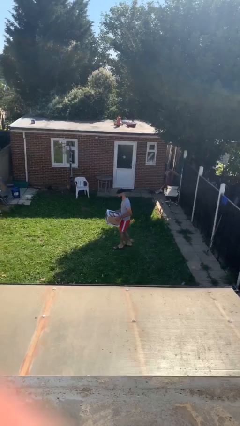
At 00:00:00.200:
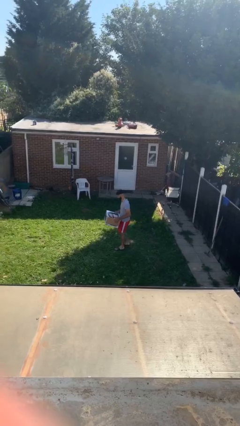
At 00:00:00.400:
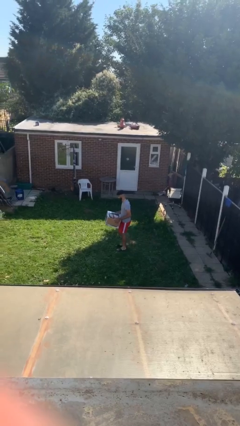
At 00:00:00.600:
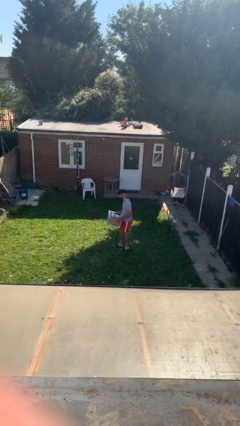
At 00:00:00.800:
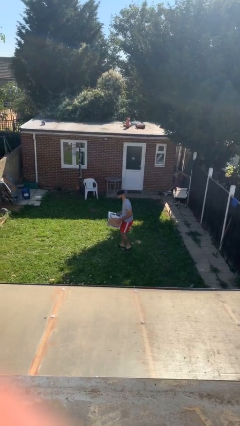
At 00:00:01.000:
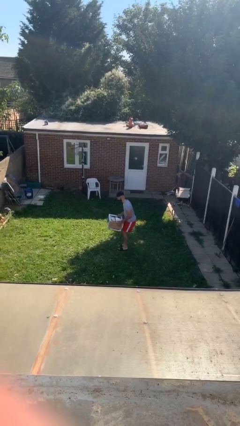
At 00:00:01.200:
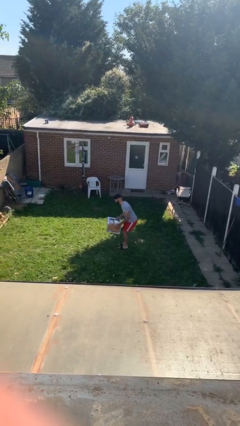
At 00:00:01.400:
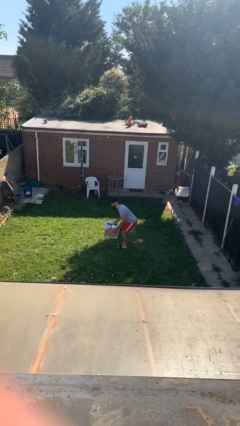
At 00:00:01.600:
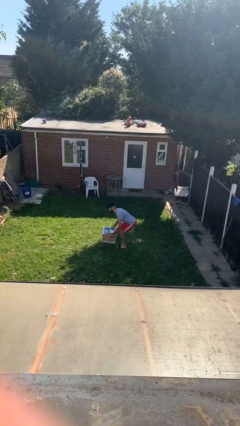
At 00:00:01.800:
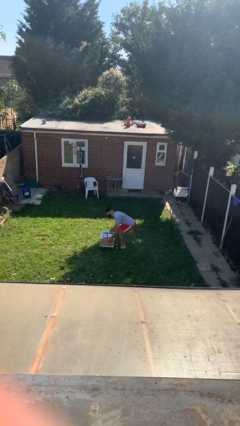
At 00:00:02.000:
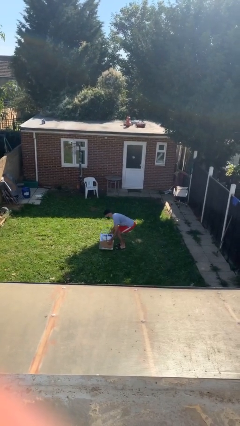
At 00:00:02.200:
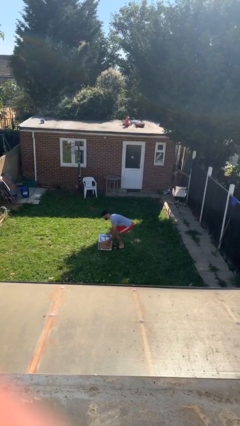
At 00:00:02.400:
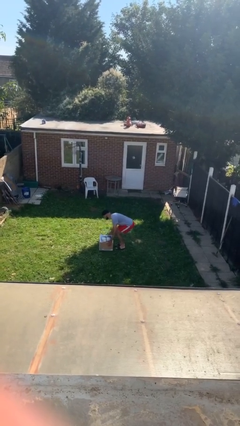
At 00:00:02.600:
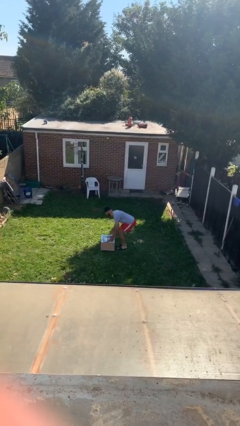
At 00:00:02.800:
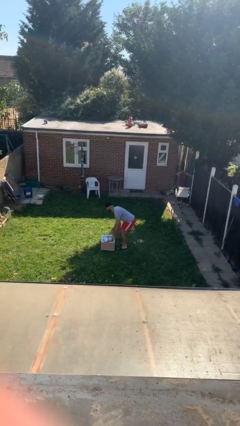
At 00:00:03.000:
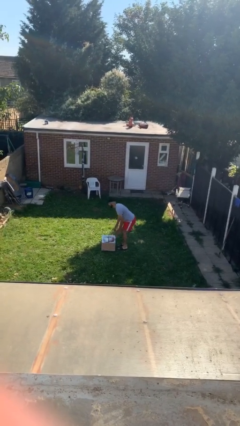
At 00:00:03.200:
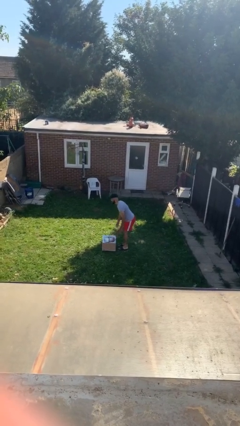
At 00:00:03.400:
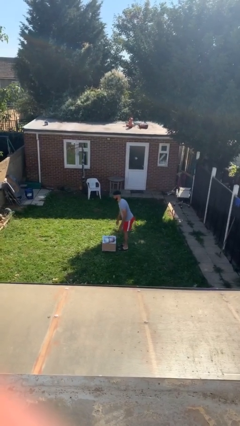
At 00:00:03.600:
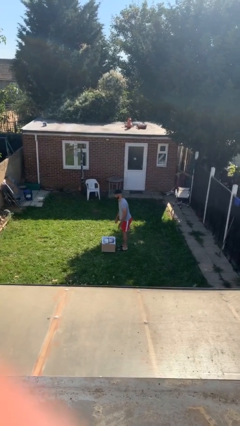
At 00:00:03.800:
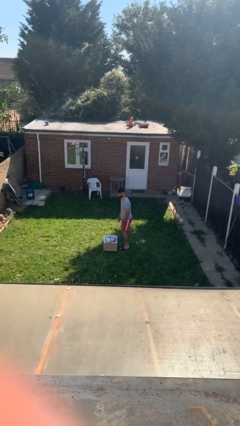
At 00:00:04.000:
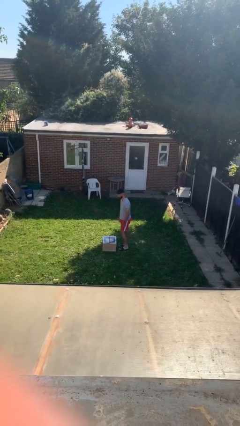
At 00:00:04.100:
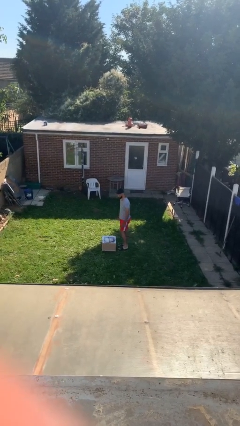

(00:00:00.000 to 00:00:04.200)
person puts down object on floor

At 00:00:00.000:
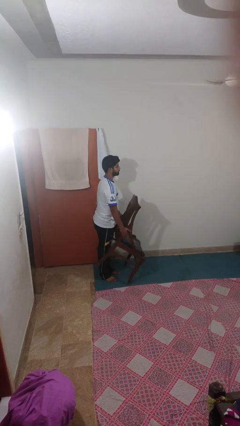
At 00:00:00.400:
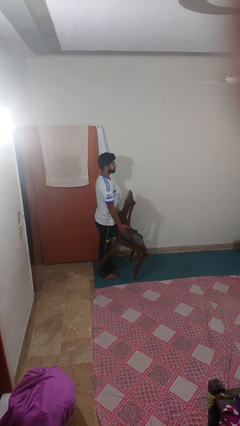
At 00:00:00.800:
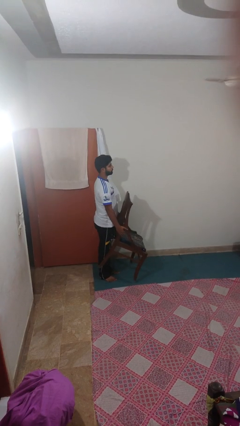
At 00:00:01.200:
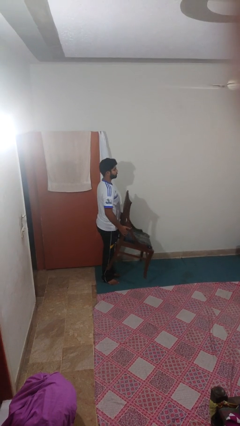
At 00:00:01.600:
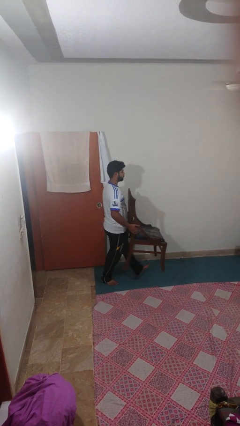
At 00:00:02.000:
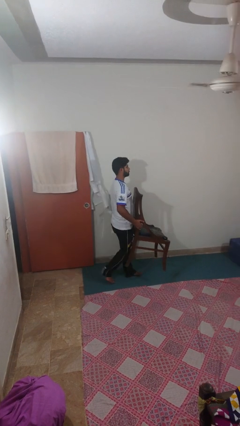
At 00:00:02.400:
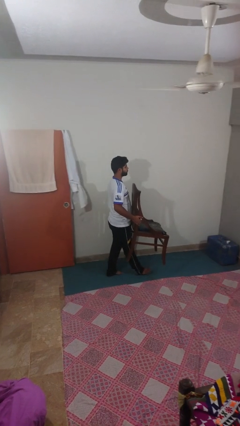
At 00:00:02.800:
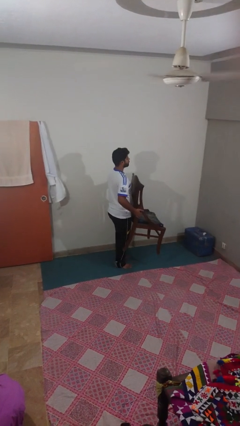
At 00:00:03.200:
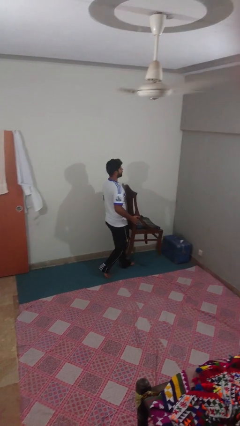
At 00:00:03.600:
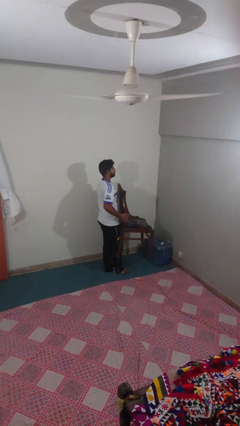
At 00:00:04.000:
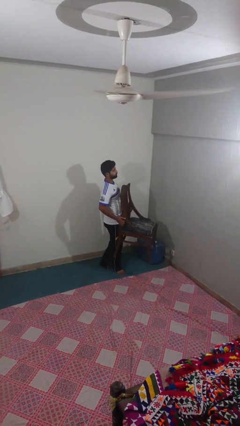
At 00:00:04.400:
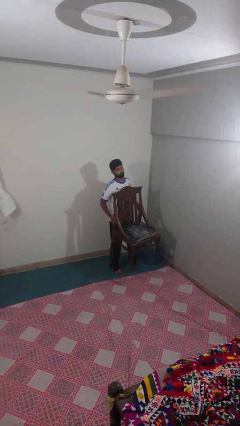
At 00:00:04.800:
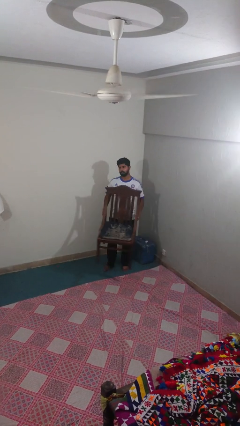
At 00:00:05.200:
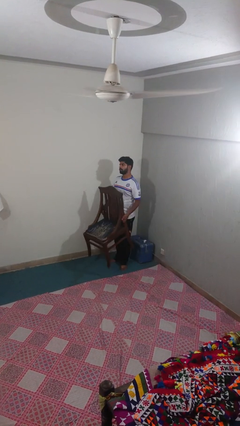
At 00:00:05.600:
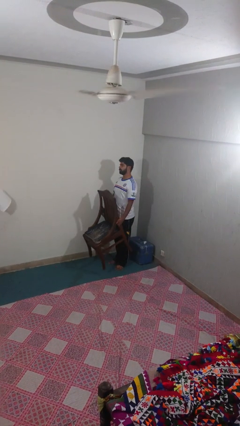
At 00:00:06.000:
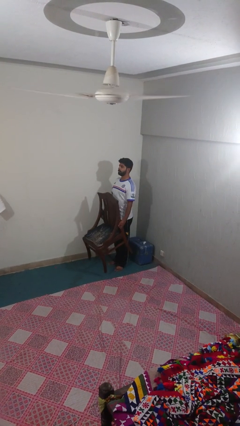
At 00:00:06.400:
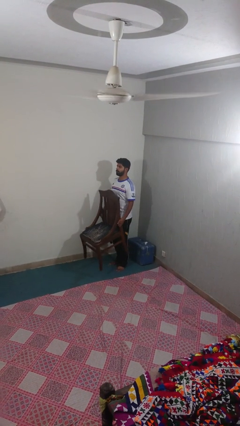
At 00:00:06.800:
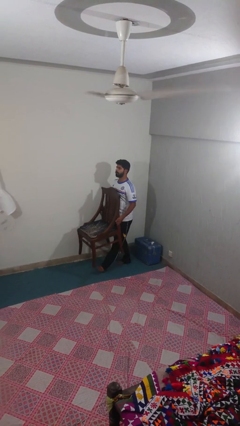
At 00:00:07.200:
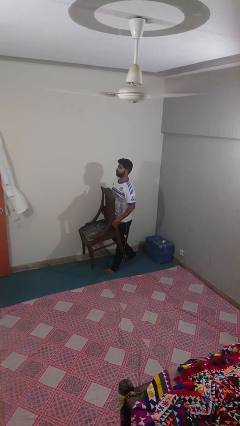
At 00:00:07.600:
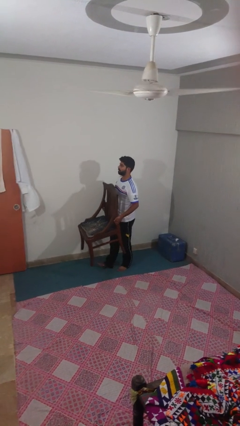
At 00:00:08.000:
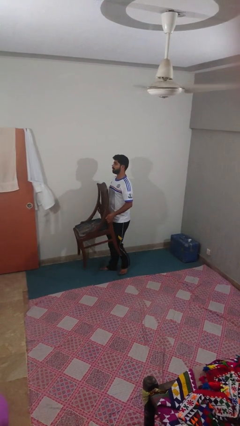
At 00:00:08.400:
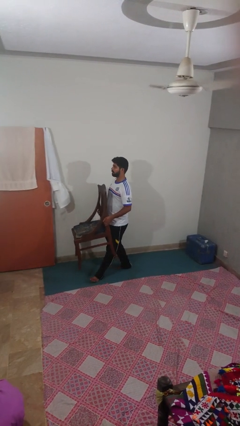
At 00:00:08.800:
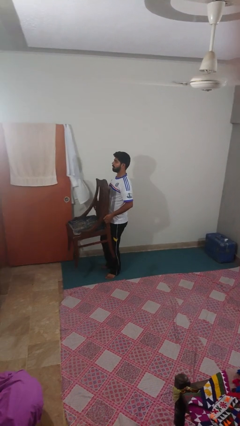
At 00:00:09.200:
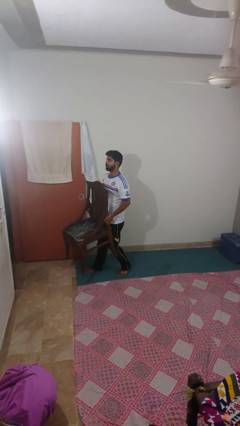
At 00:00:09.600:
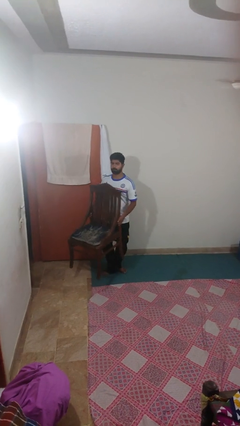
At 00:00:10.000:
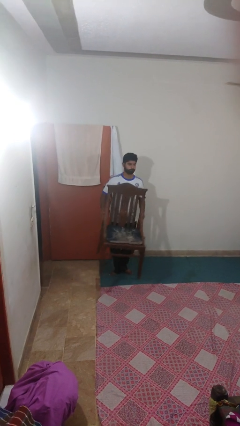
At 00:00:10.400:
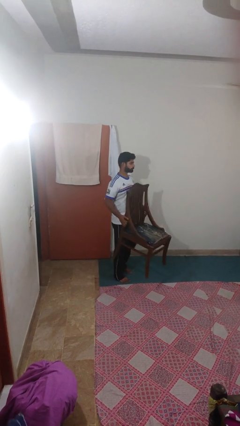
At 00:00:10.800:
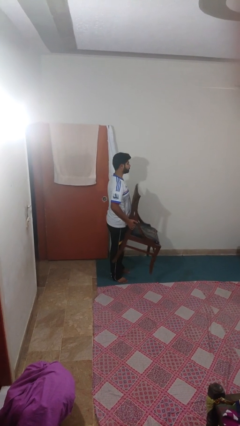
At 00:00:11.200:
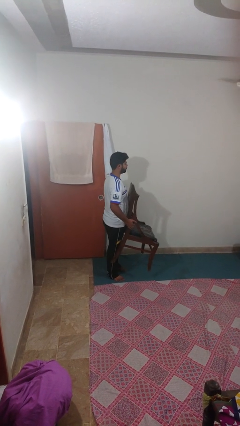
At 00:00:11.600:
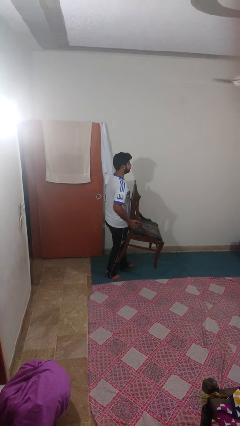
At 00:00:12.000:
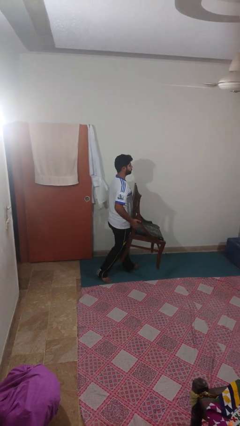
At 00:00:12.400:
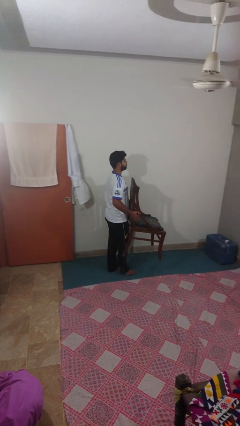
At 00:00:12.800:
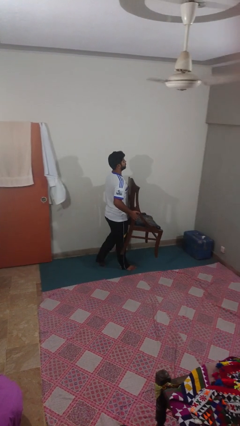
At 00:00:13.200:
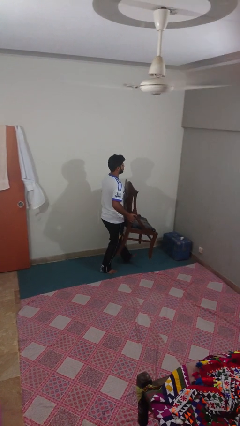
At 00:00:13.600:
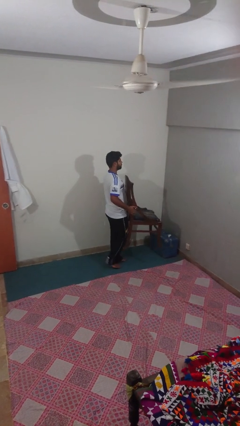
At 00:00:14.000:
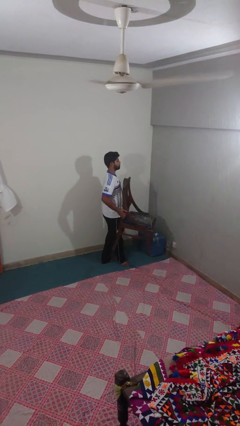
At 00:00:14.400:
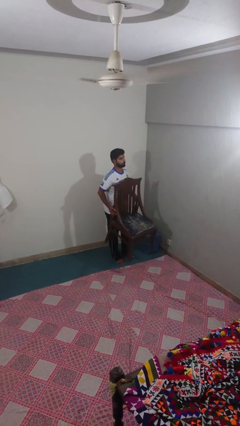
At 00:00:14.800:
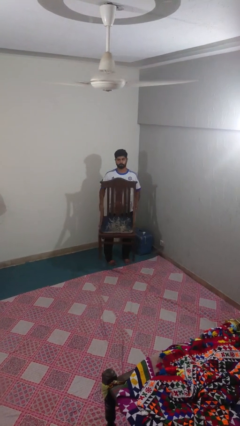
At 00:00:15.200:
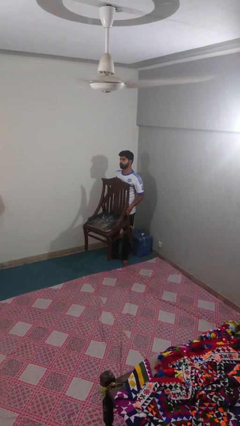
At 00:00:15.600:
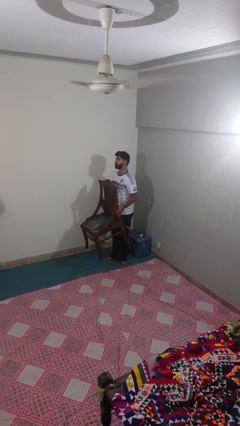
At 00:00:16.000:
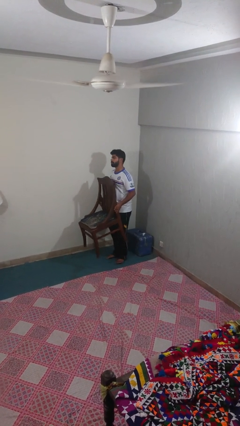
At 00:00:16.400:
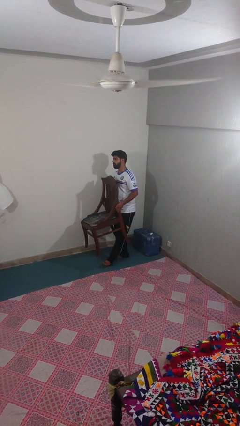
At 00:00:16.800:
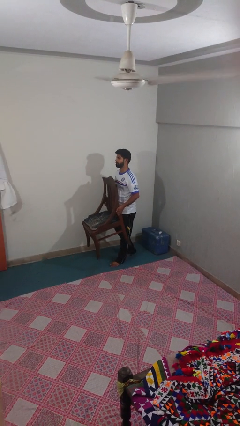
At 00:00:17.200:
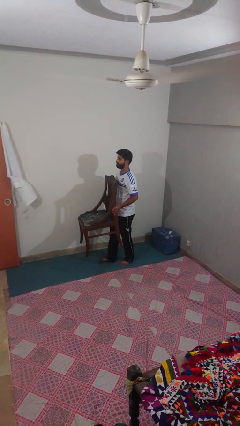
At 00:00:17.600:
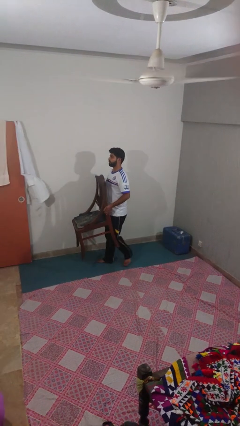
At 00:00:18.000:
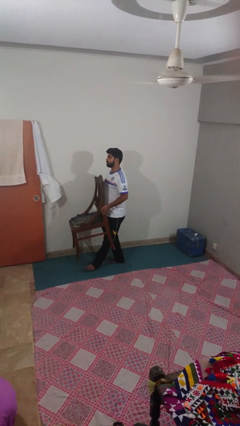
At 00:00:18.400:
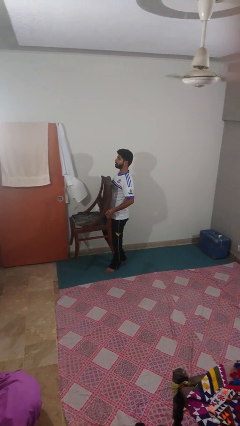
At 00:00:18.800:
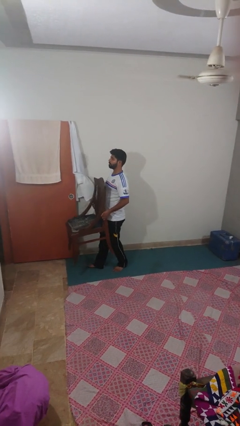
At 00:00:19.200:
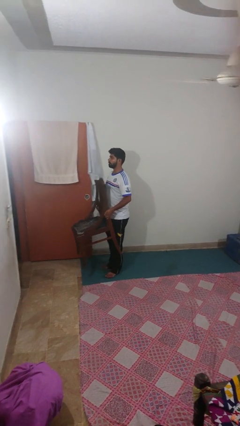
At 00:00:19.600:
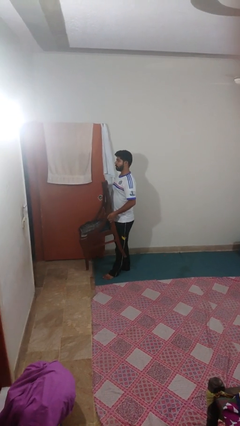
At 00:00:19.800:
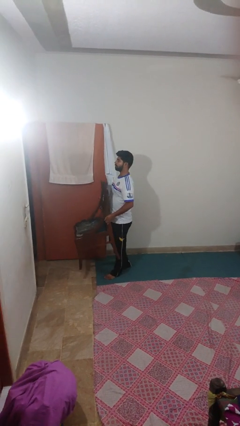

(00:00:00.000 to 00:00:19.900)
person carries furniture

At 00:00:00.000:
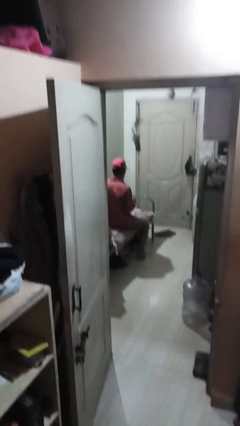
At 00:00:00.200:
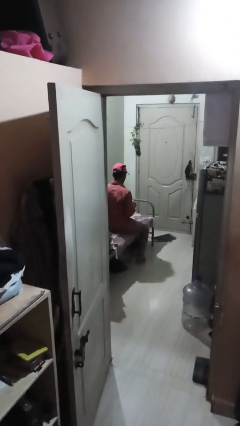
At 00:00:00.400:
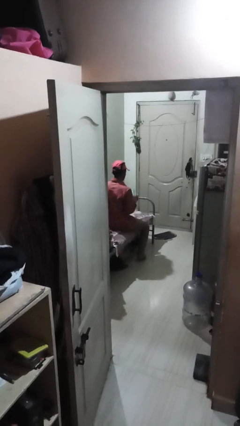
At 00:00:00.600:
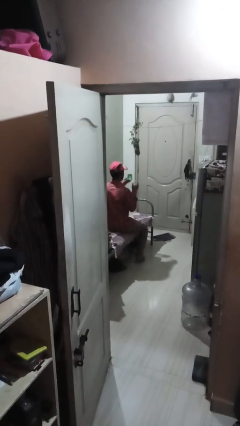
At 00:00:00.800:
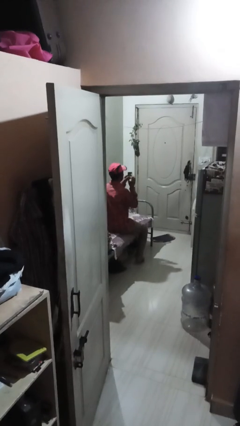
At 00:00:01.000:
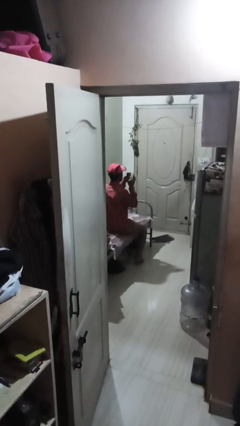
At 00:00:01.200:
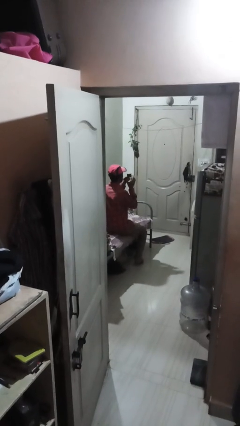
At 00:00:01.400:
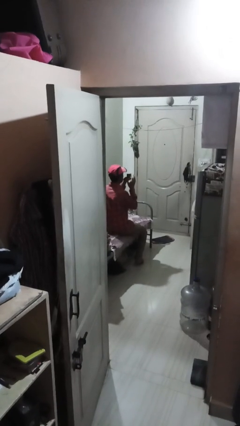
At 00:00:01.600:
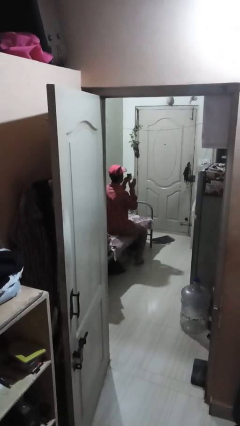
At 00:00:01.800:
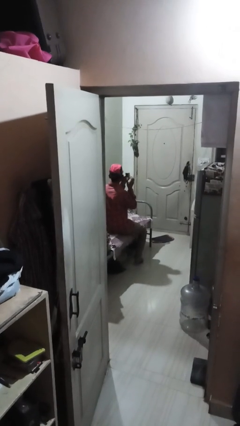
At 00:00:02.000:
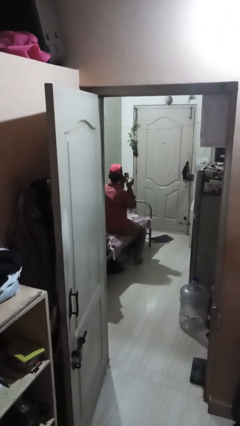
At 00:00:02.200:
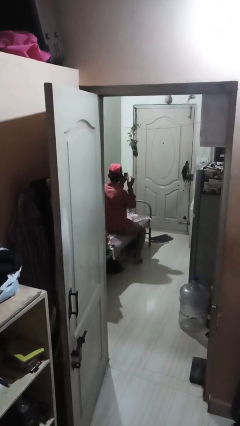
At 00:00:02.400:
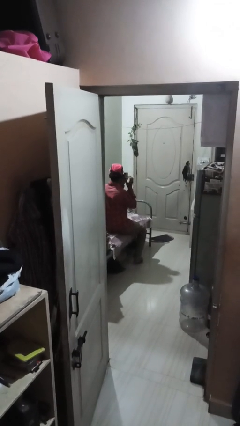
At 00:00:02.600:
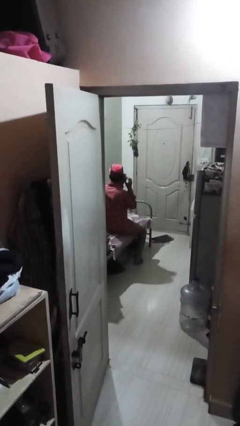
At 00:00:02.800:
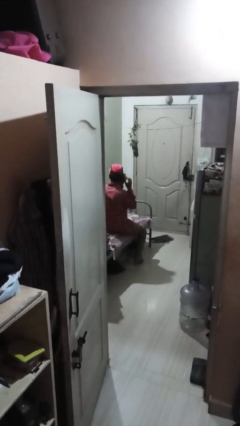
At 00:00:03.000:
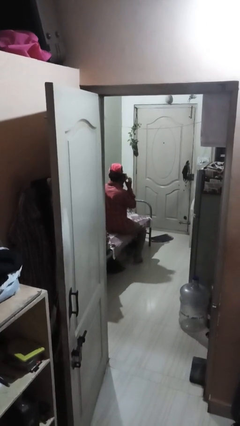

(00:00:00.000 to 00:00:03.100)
person taps object with finger

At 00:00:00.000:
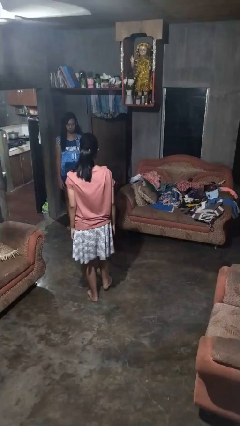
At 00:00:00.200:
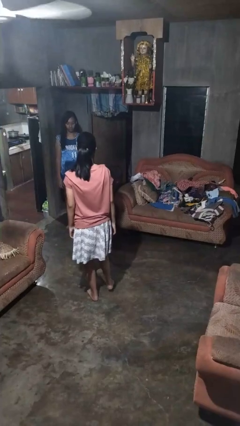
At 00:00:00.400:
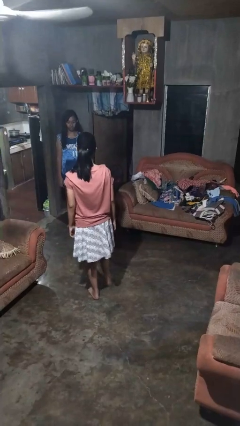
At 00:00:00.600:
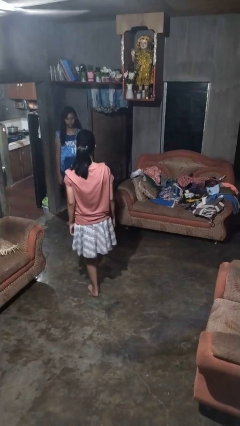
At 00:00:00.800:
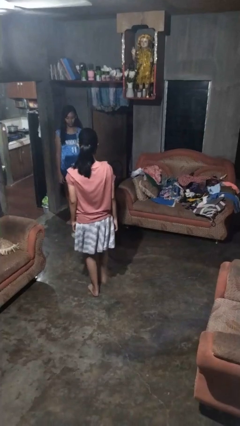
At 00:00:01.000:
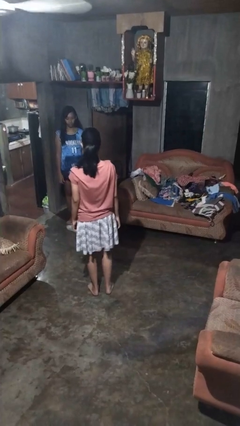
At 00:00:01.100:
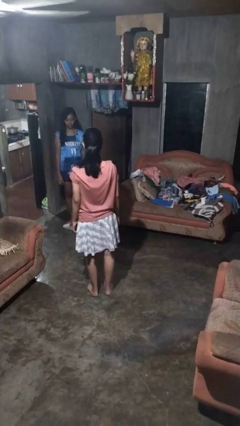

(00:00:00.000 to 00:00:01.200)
person kicks object to person
